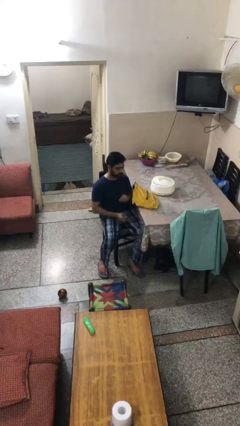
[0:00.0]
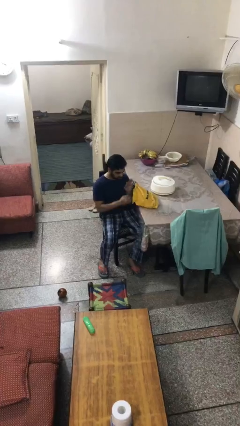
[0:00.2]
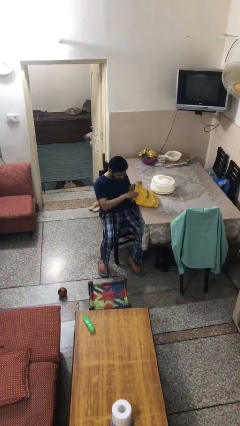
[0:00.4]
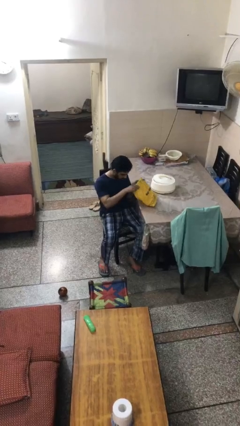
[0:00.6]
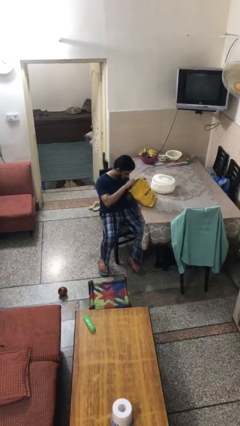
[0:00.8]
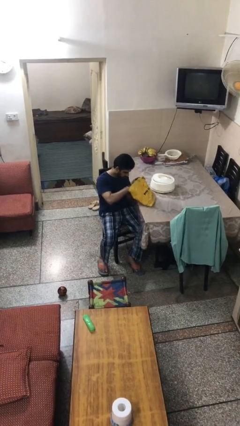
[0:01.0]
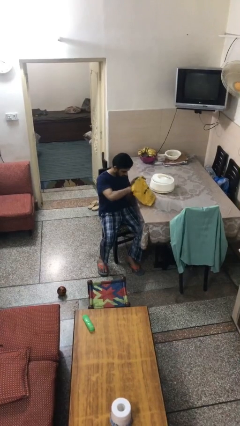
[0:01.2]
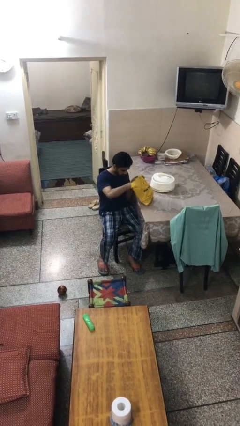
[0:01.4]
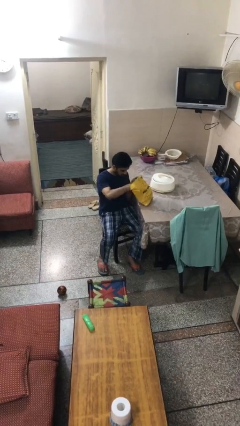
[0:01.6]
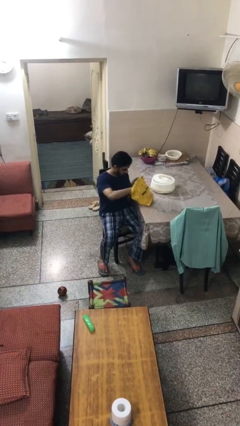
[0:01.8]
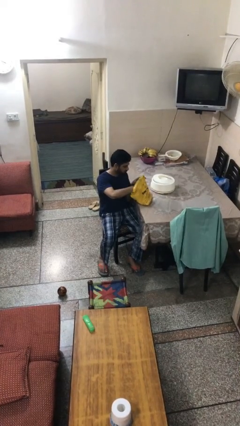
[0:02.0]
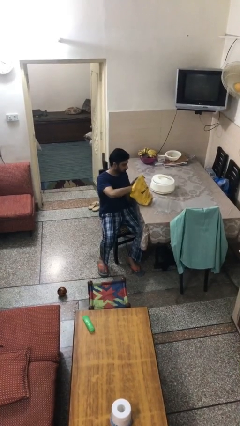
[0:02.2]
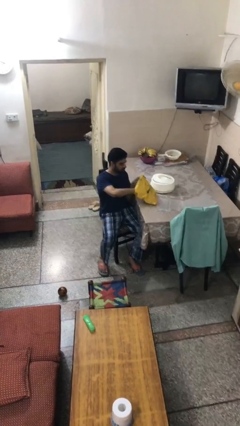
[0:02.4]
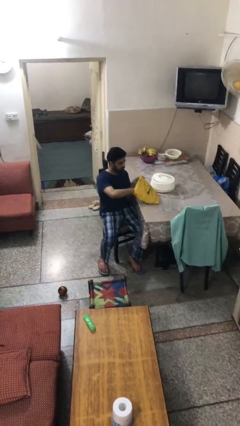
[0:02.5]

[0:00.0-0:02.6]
person searches in bag

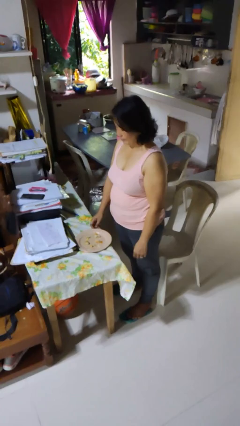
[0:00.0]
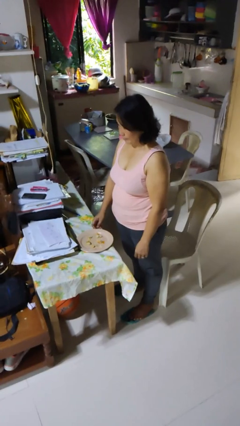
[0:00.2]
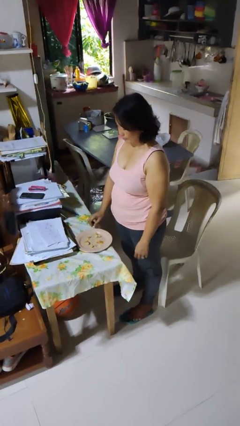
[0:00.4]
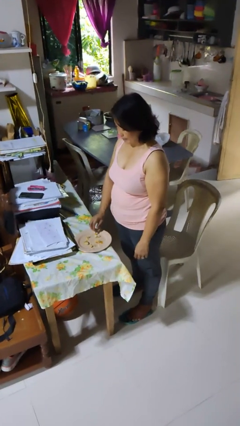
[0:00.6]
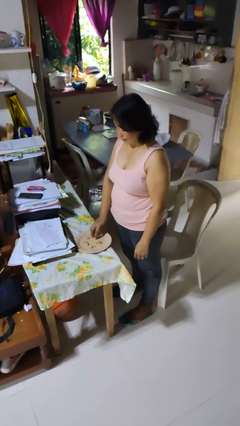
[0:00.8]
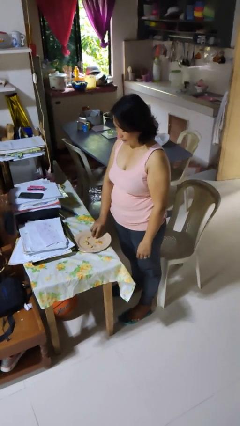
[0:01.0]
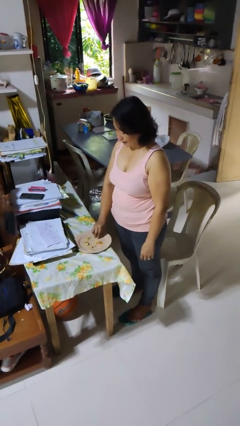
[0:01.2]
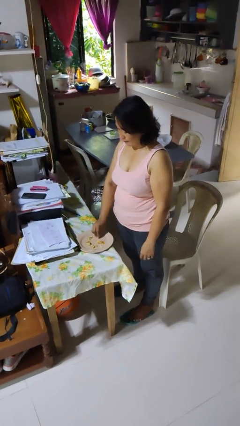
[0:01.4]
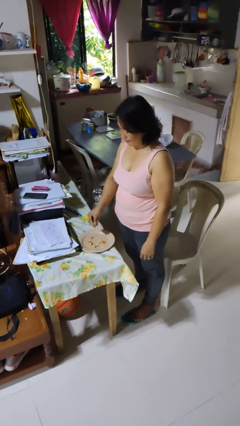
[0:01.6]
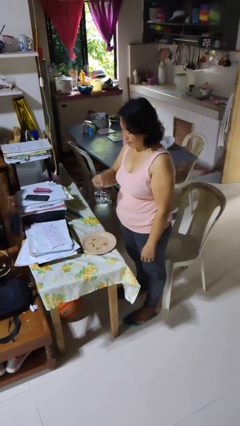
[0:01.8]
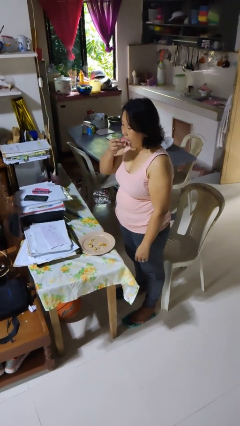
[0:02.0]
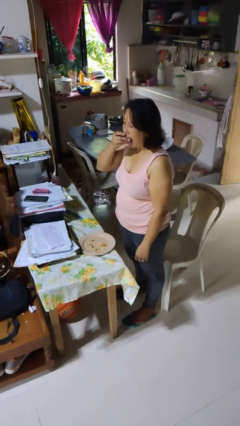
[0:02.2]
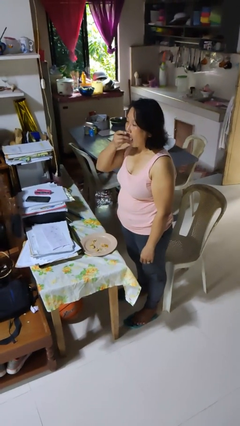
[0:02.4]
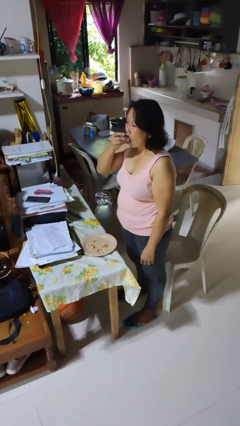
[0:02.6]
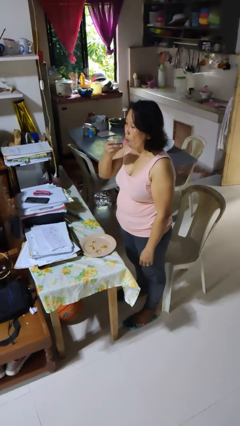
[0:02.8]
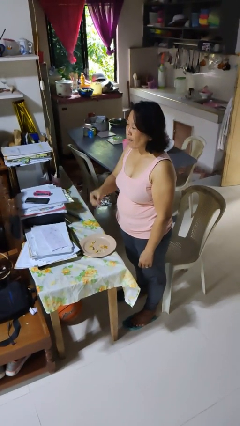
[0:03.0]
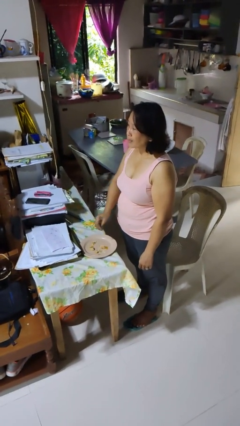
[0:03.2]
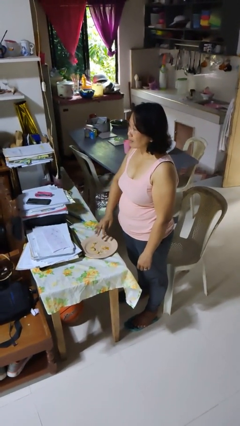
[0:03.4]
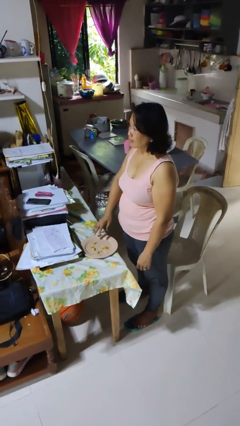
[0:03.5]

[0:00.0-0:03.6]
person eats with hands

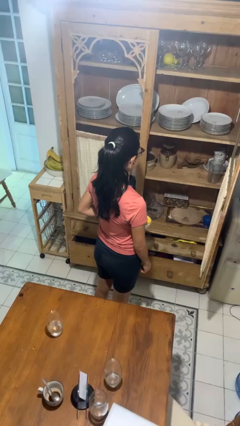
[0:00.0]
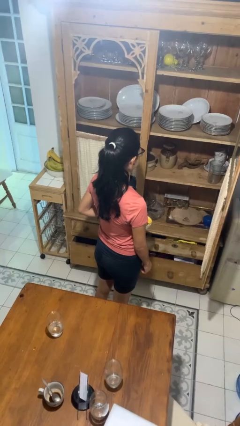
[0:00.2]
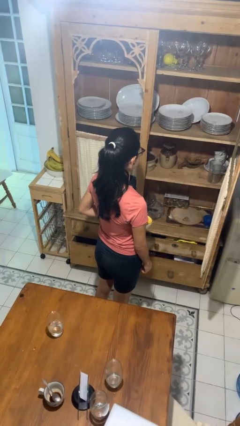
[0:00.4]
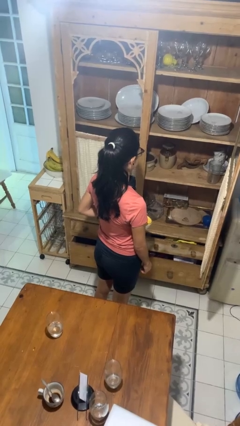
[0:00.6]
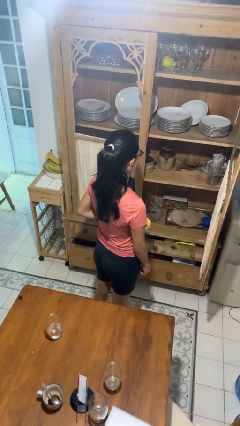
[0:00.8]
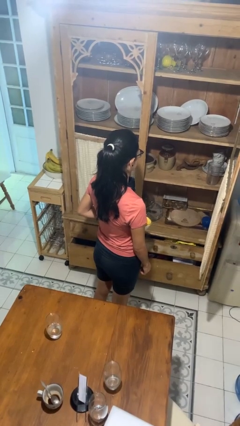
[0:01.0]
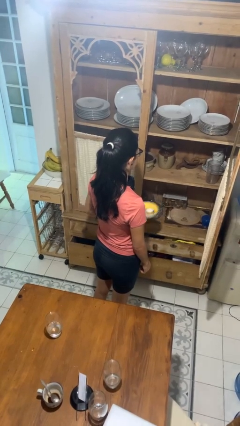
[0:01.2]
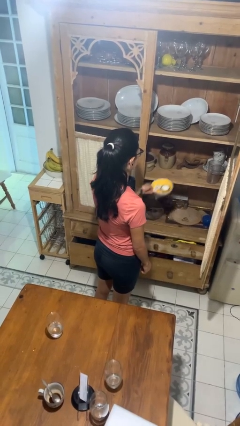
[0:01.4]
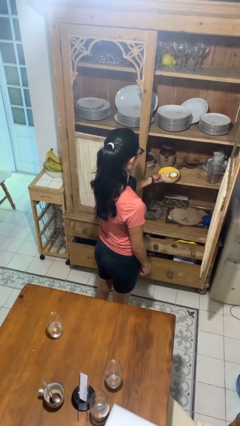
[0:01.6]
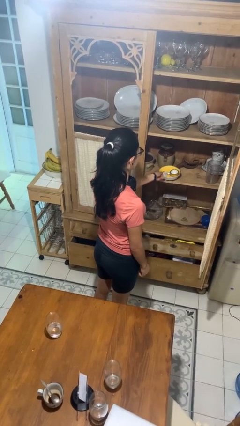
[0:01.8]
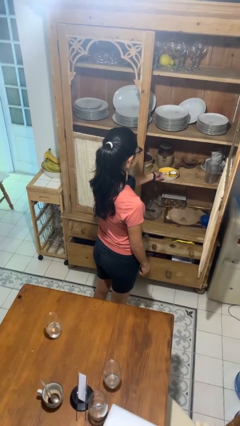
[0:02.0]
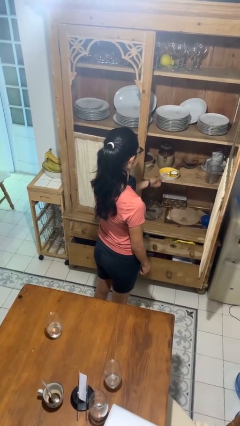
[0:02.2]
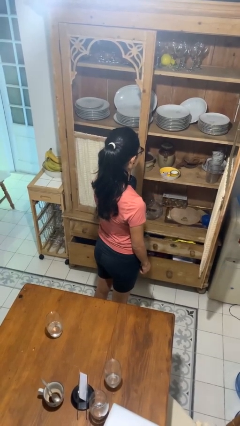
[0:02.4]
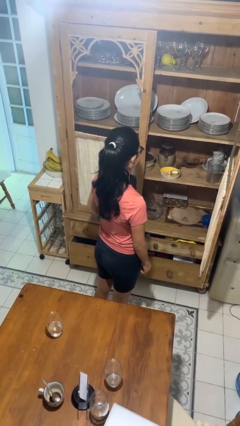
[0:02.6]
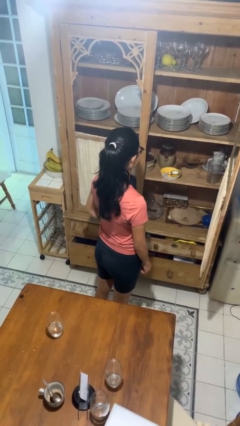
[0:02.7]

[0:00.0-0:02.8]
person puts object in cabinet

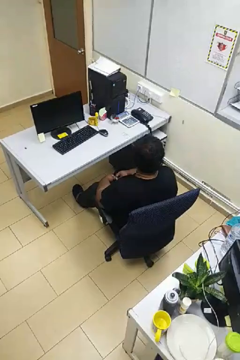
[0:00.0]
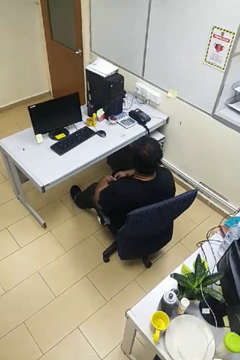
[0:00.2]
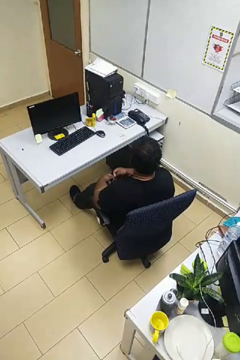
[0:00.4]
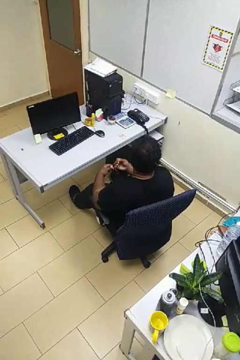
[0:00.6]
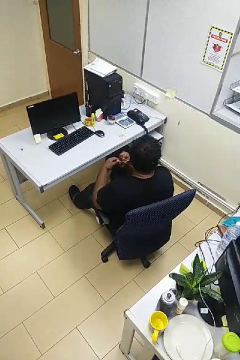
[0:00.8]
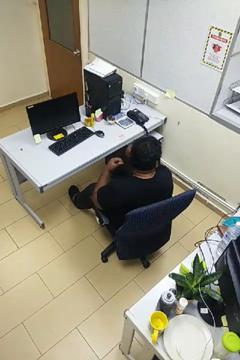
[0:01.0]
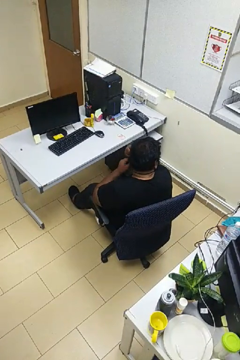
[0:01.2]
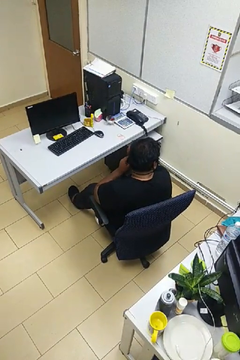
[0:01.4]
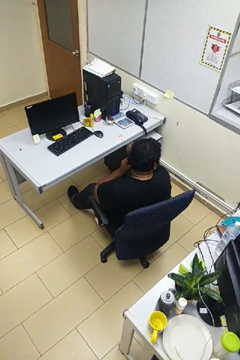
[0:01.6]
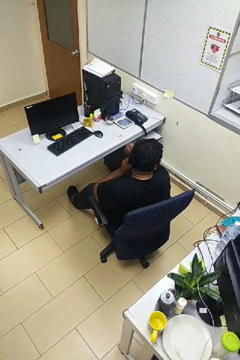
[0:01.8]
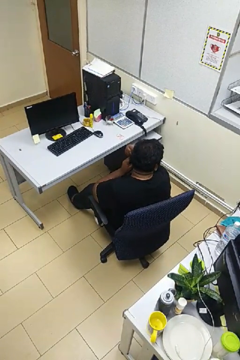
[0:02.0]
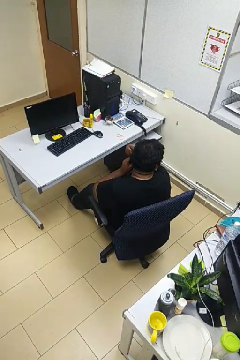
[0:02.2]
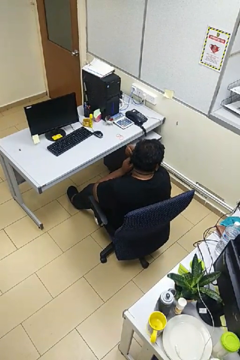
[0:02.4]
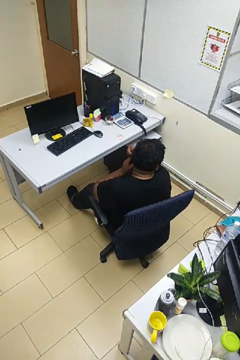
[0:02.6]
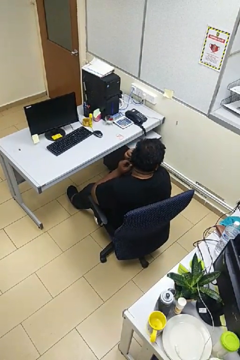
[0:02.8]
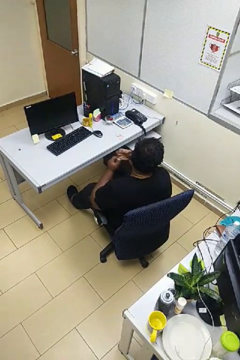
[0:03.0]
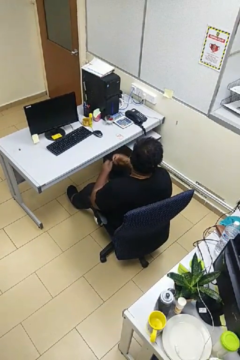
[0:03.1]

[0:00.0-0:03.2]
person puts on earrings

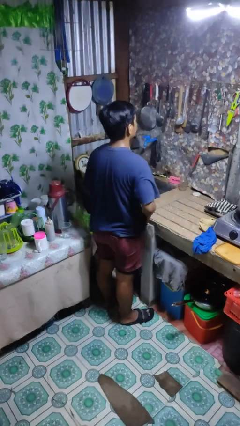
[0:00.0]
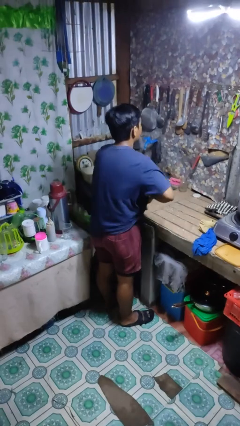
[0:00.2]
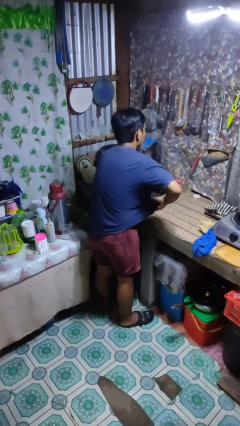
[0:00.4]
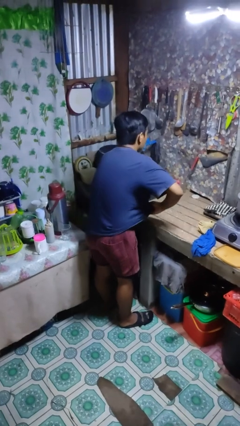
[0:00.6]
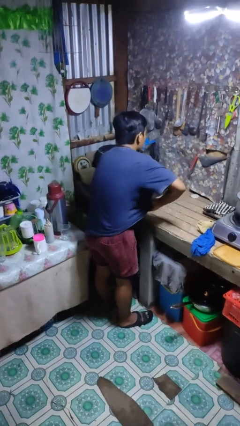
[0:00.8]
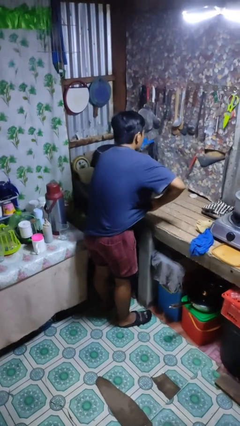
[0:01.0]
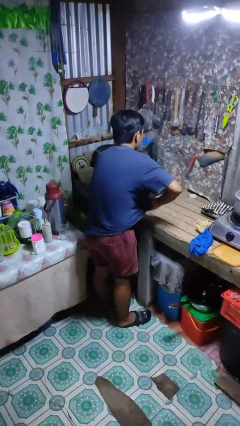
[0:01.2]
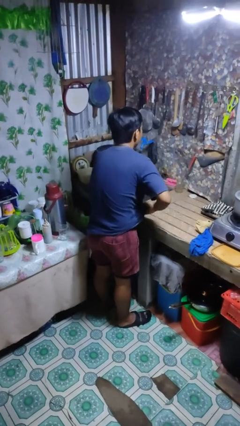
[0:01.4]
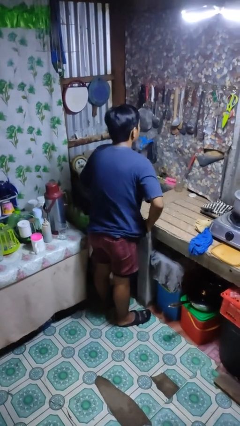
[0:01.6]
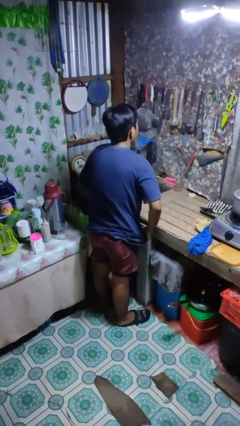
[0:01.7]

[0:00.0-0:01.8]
person applies deodorant

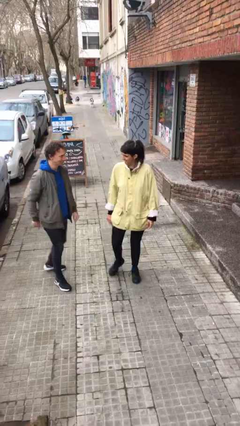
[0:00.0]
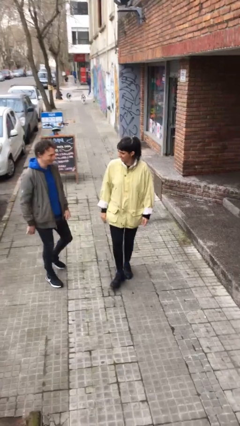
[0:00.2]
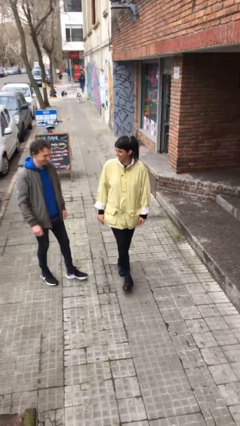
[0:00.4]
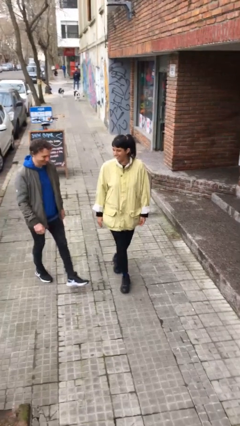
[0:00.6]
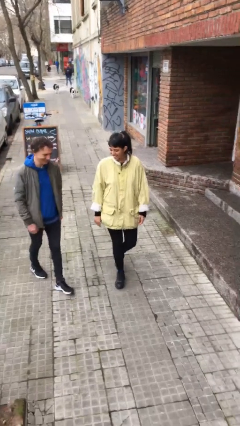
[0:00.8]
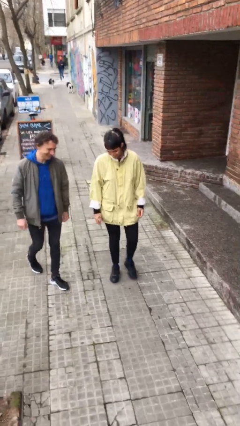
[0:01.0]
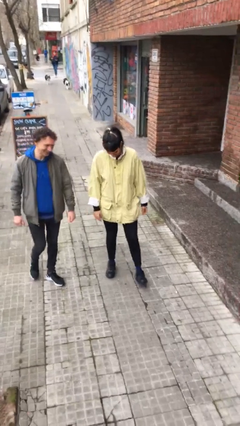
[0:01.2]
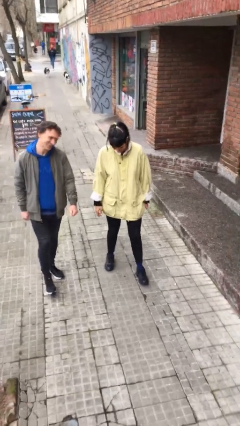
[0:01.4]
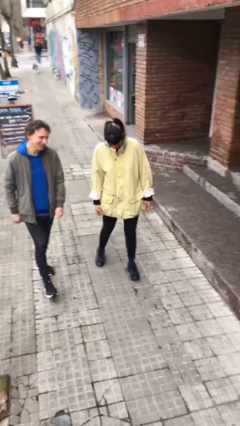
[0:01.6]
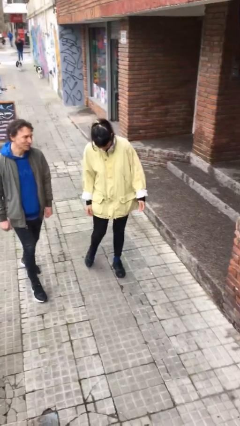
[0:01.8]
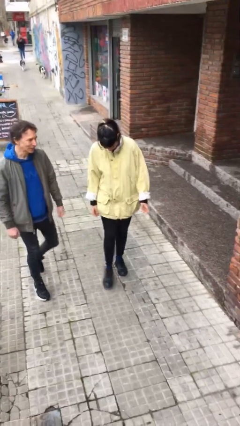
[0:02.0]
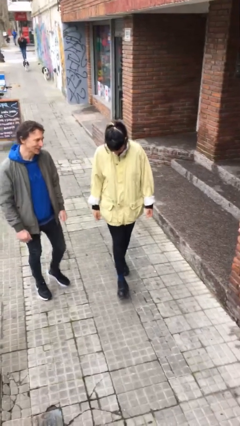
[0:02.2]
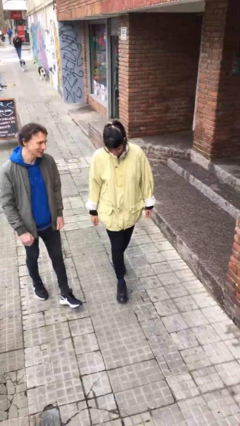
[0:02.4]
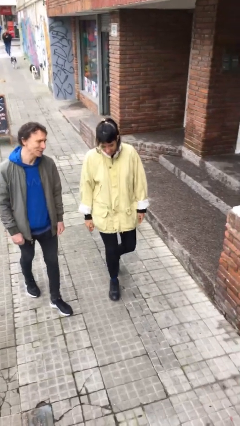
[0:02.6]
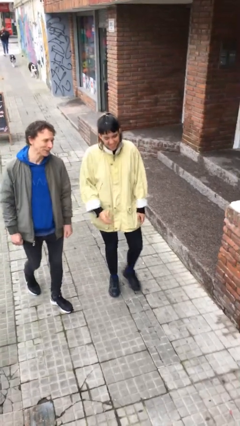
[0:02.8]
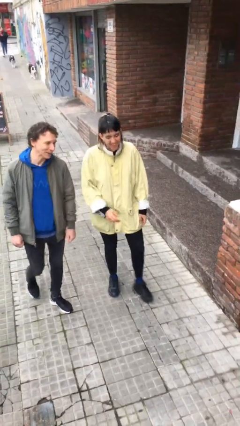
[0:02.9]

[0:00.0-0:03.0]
person talks to person

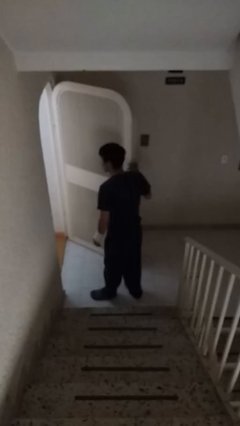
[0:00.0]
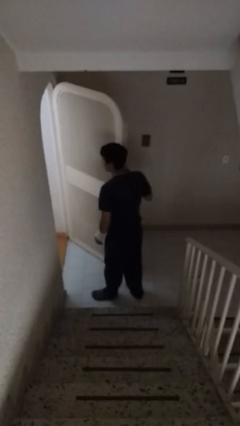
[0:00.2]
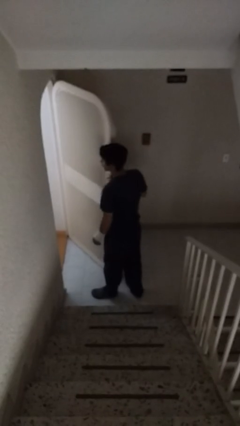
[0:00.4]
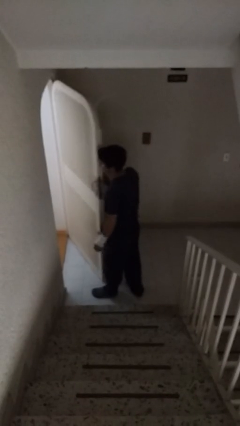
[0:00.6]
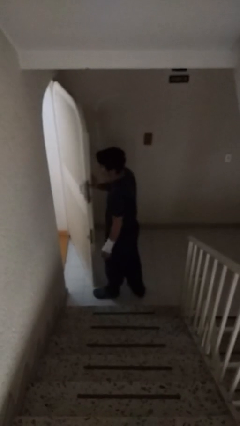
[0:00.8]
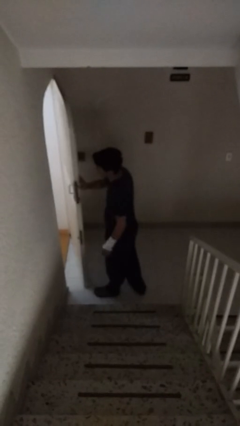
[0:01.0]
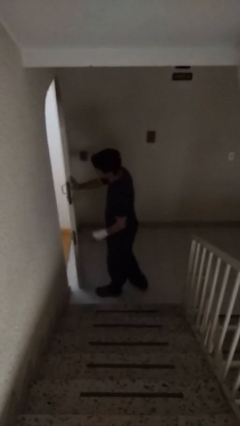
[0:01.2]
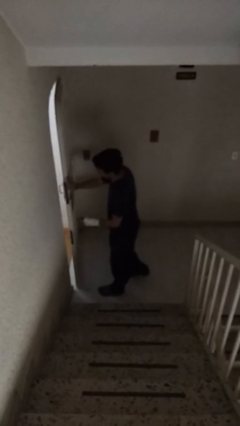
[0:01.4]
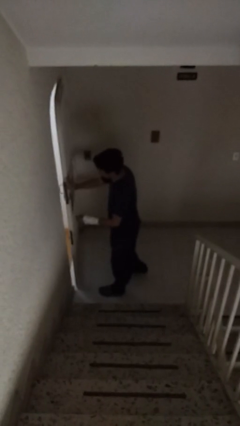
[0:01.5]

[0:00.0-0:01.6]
person closes facility door
